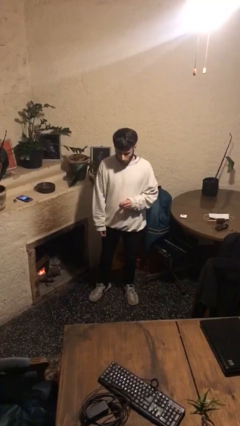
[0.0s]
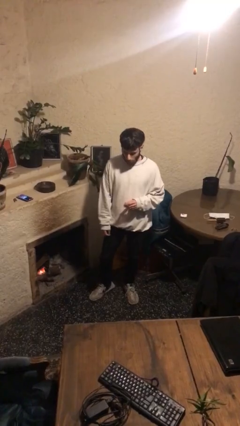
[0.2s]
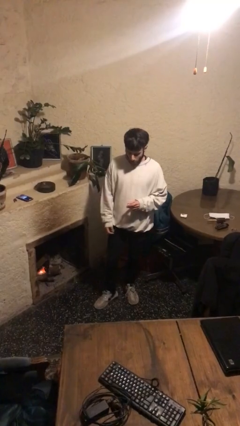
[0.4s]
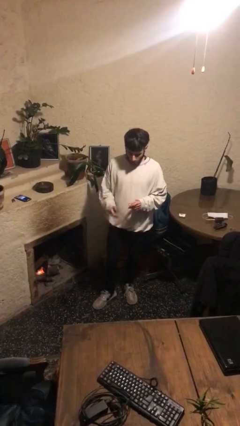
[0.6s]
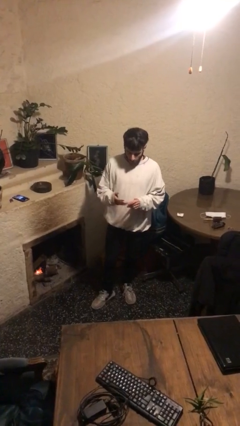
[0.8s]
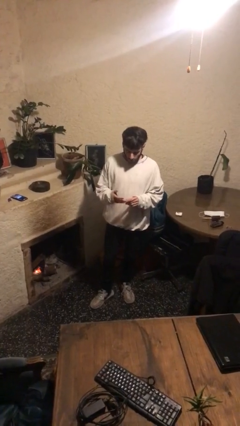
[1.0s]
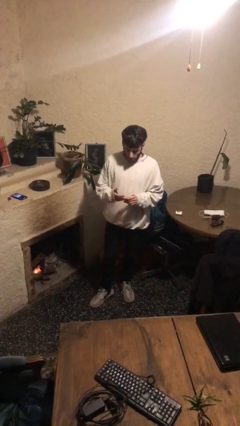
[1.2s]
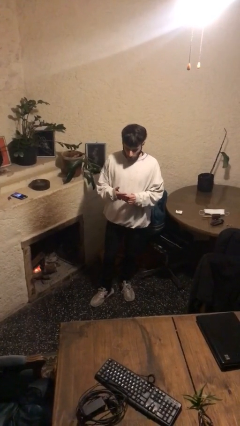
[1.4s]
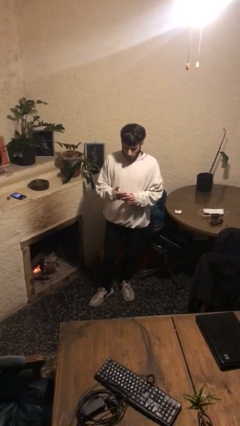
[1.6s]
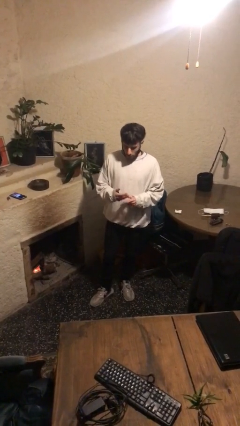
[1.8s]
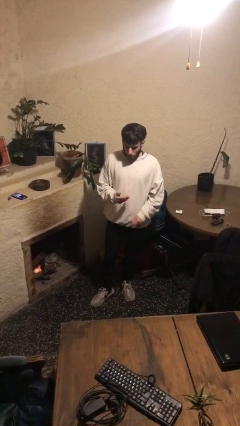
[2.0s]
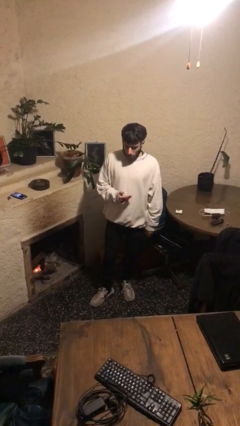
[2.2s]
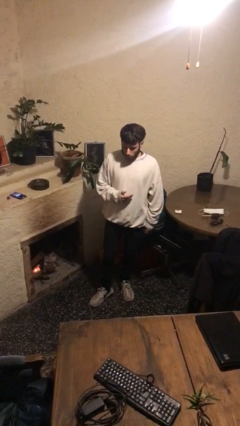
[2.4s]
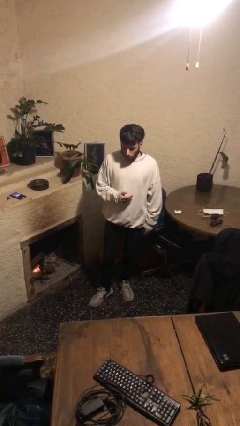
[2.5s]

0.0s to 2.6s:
person puts on ring

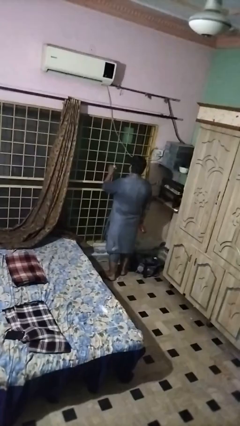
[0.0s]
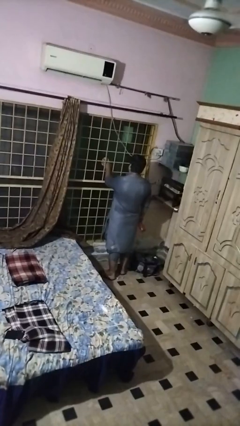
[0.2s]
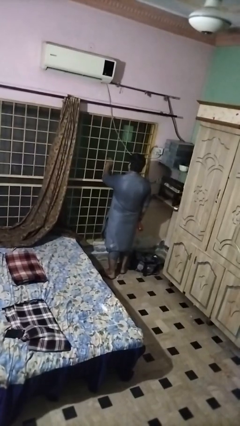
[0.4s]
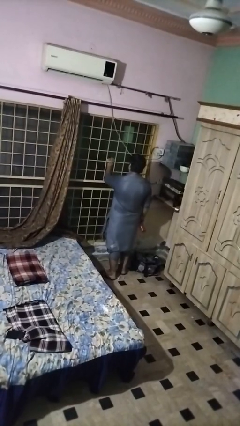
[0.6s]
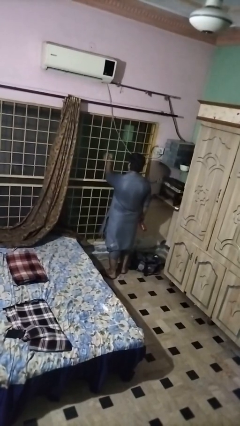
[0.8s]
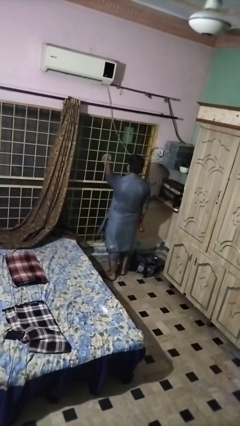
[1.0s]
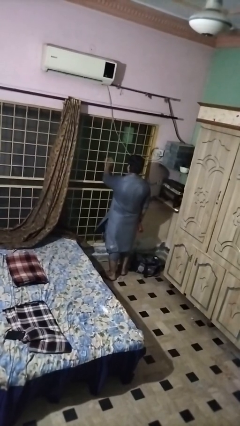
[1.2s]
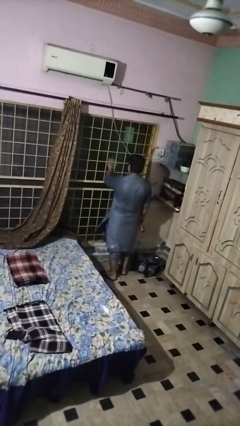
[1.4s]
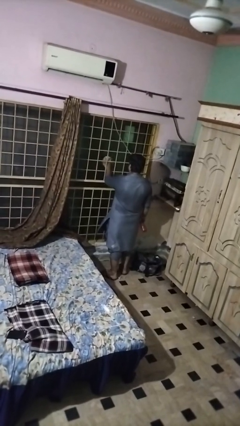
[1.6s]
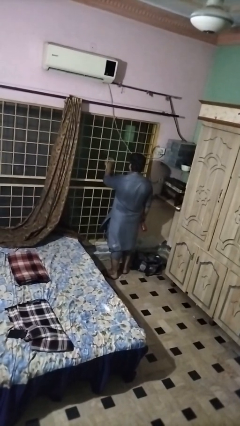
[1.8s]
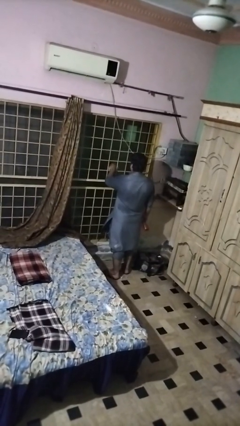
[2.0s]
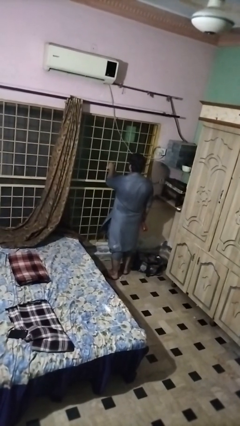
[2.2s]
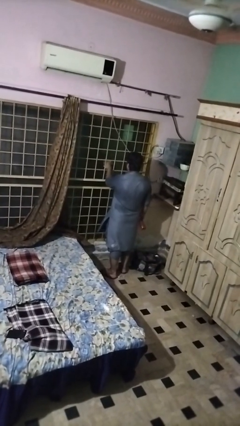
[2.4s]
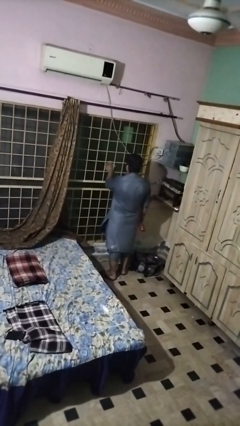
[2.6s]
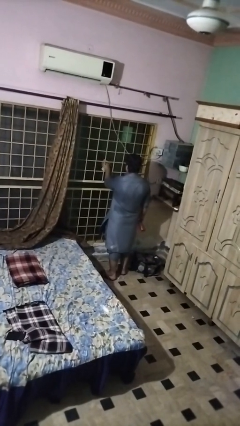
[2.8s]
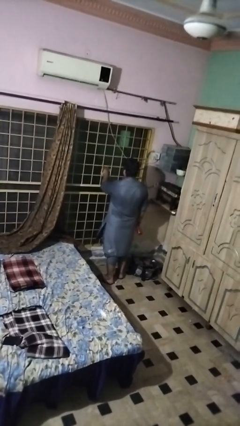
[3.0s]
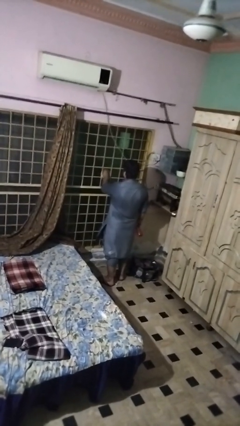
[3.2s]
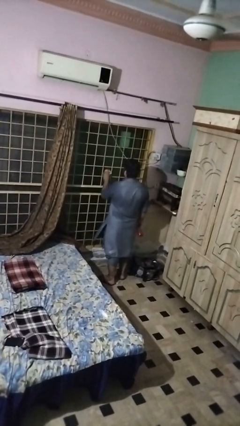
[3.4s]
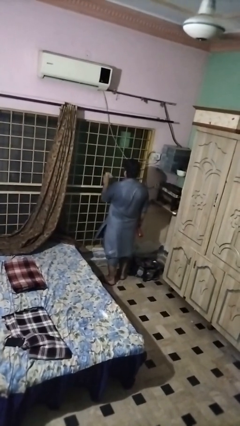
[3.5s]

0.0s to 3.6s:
person washes window

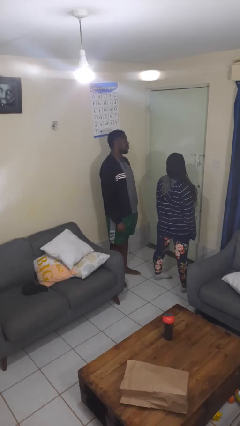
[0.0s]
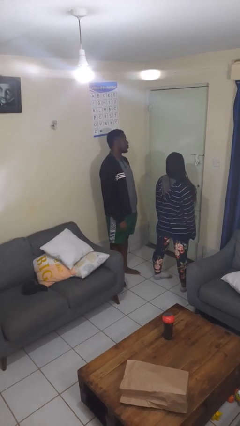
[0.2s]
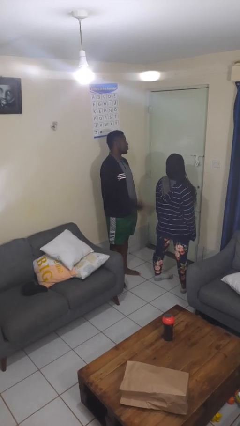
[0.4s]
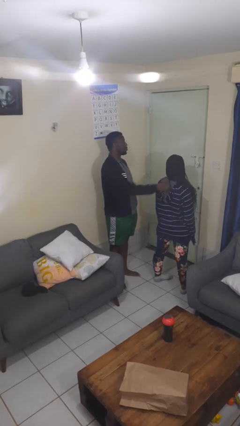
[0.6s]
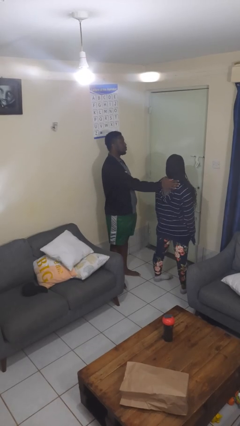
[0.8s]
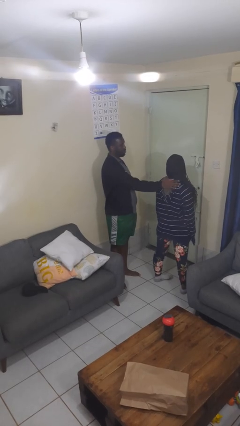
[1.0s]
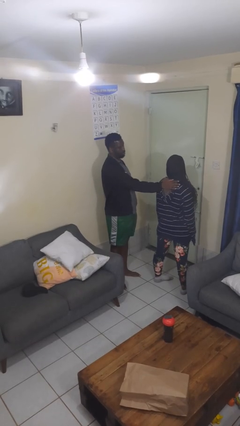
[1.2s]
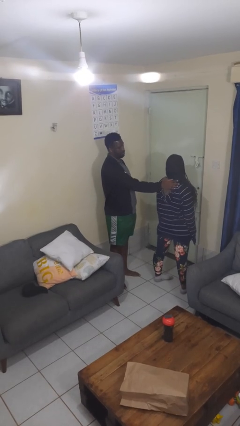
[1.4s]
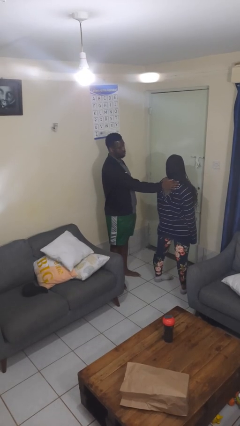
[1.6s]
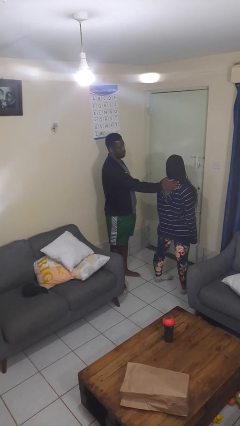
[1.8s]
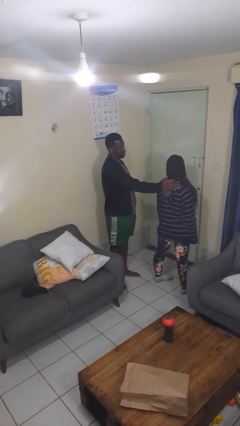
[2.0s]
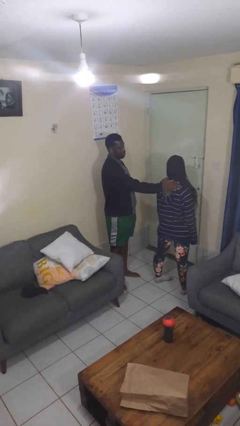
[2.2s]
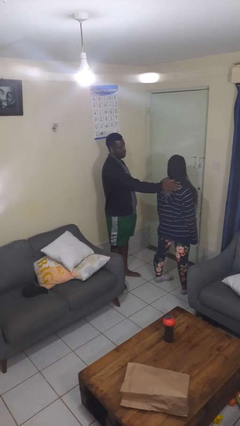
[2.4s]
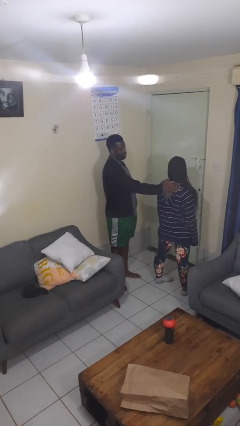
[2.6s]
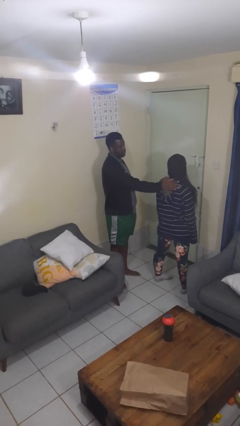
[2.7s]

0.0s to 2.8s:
person touches back of person

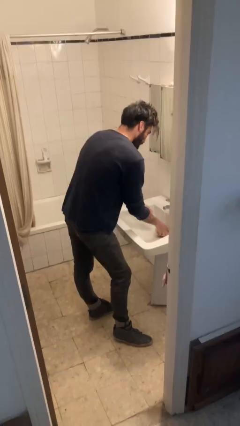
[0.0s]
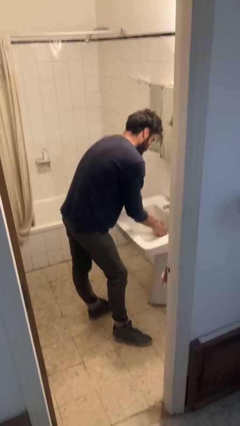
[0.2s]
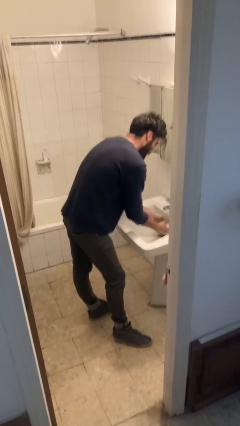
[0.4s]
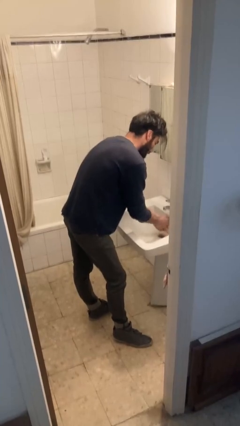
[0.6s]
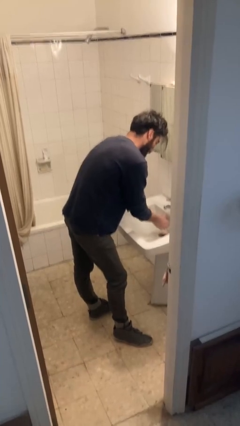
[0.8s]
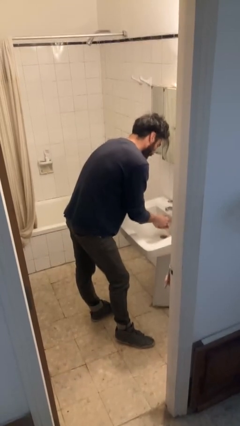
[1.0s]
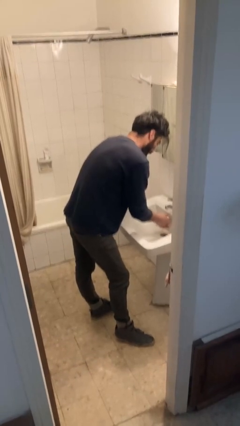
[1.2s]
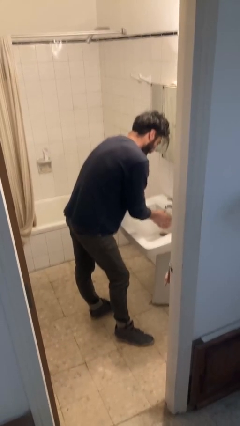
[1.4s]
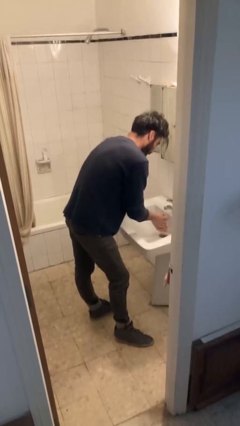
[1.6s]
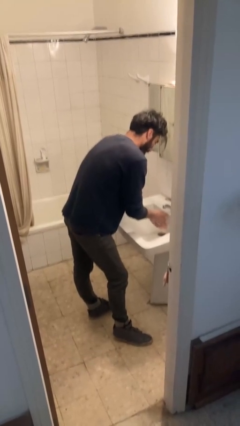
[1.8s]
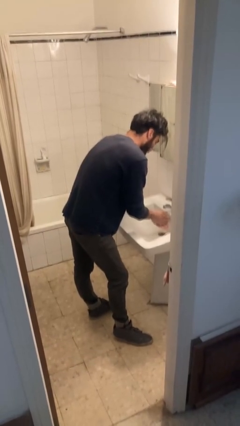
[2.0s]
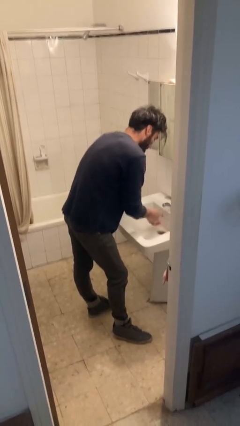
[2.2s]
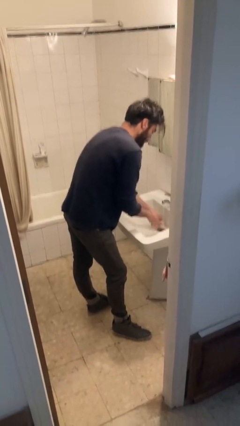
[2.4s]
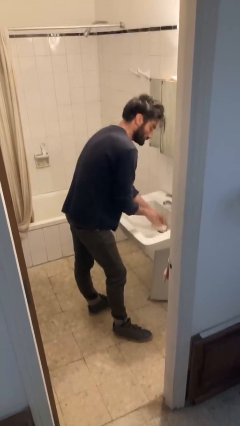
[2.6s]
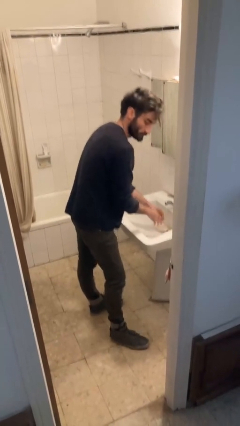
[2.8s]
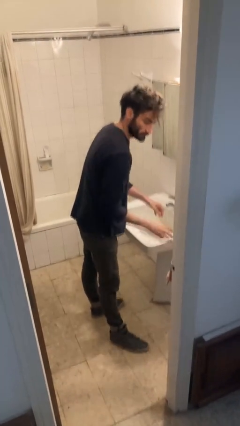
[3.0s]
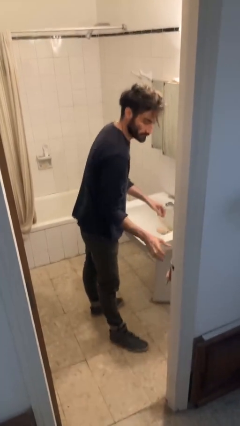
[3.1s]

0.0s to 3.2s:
person washes hands

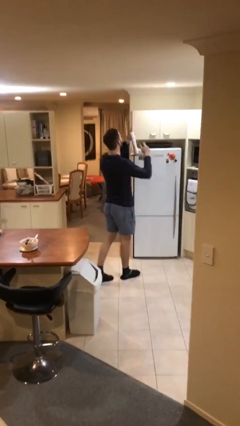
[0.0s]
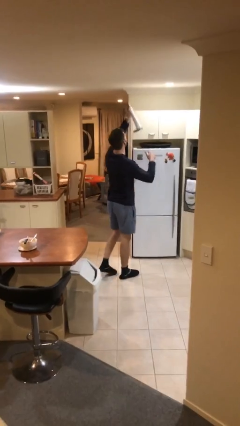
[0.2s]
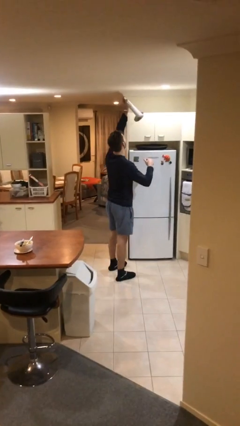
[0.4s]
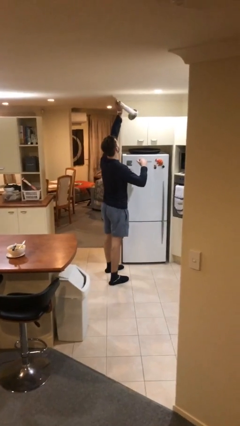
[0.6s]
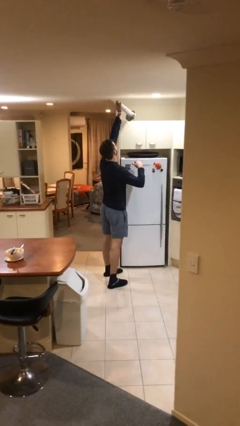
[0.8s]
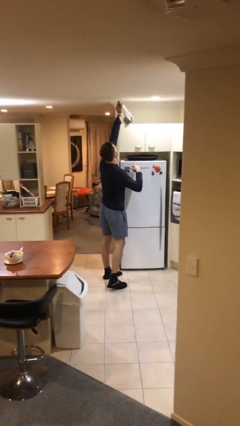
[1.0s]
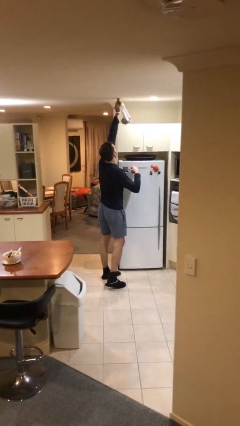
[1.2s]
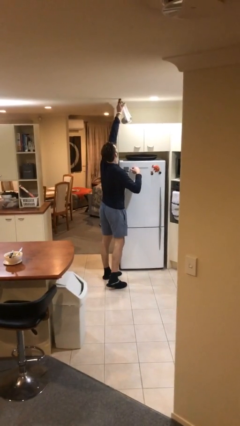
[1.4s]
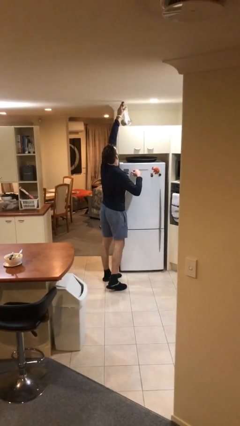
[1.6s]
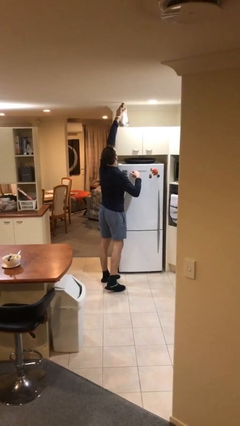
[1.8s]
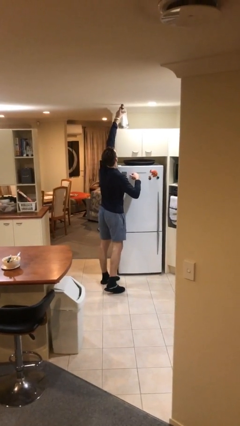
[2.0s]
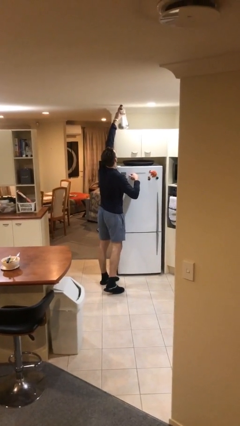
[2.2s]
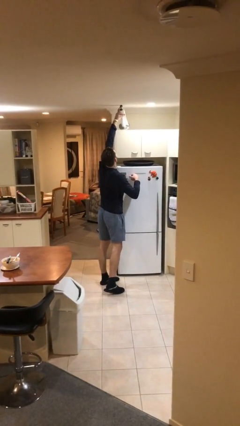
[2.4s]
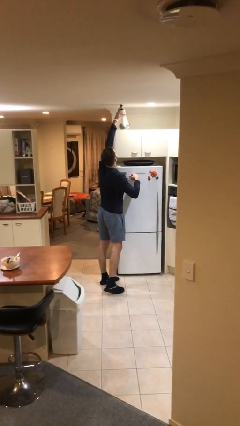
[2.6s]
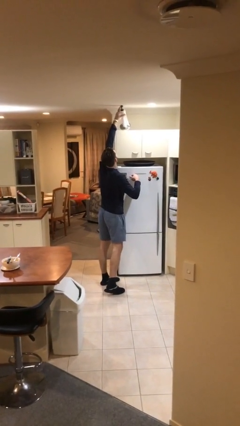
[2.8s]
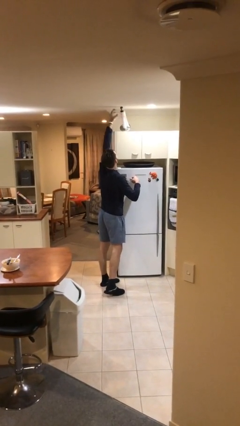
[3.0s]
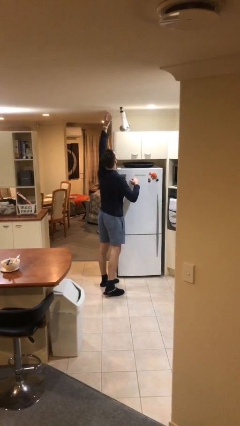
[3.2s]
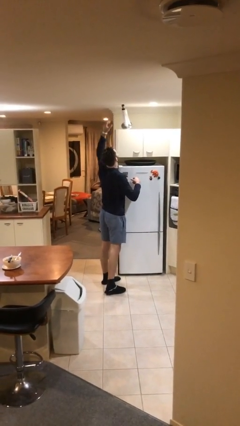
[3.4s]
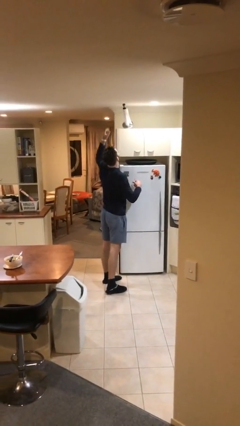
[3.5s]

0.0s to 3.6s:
person puts down object on shelf

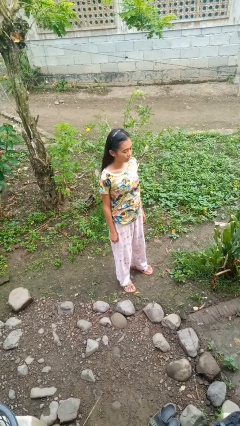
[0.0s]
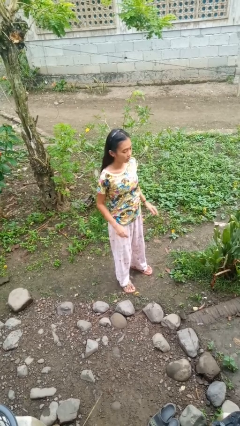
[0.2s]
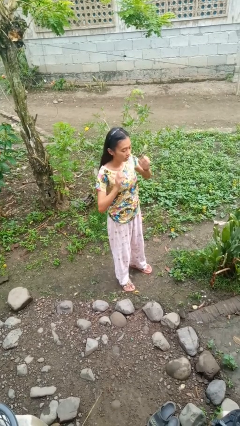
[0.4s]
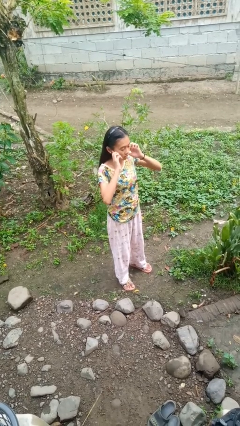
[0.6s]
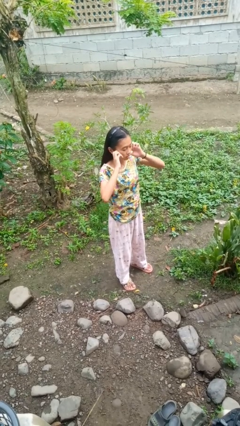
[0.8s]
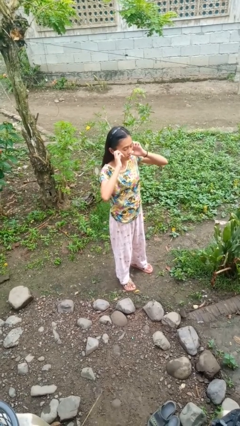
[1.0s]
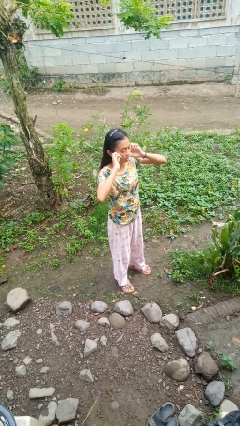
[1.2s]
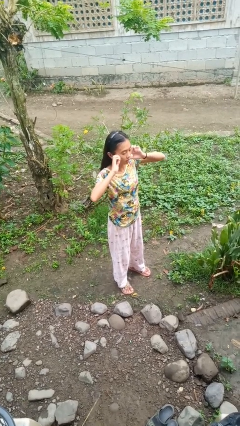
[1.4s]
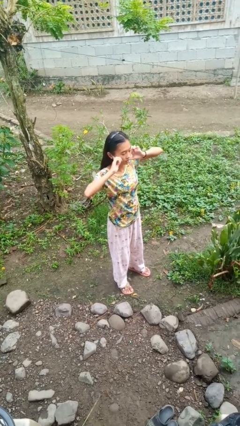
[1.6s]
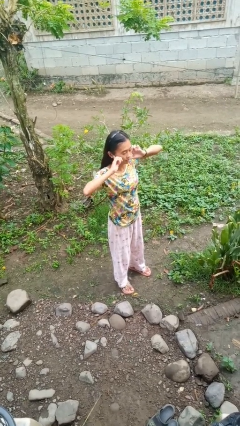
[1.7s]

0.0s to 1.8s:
person puts fingers in ear
